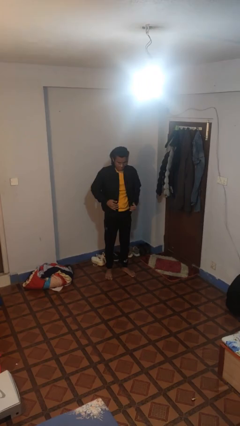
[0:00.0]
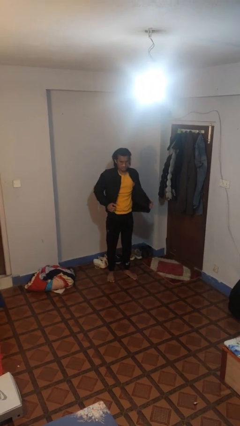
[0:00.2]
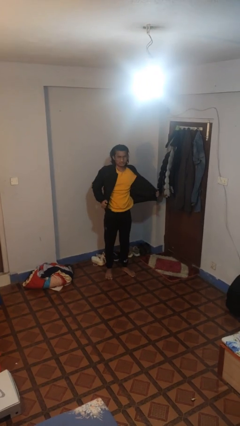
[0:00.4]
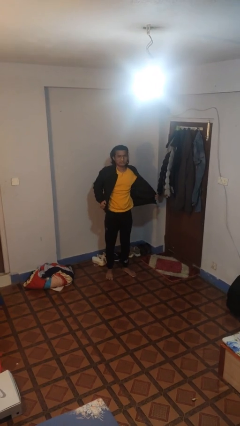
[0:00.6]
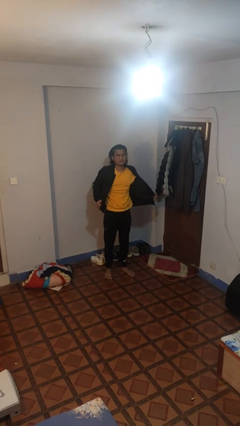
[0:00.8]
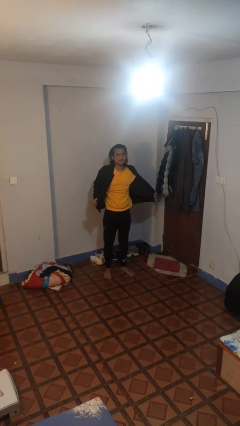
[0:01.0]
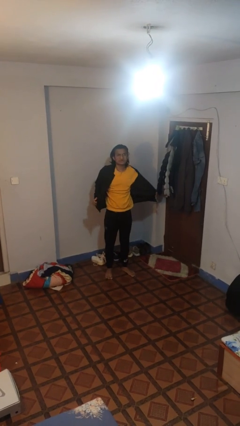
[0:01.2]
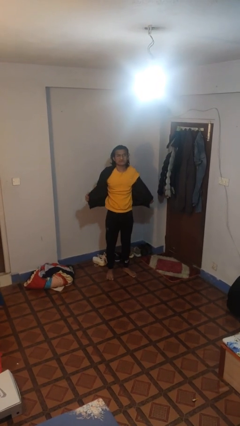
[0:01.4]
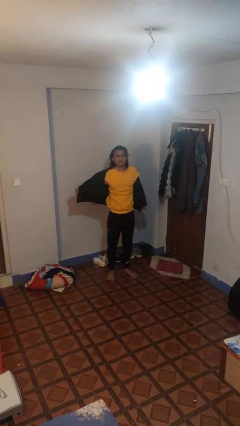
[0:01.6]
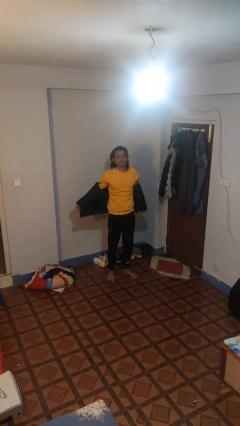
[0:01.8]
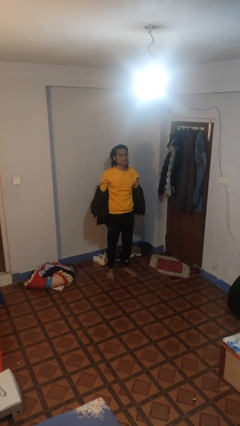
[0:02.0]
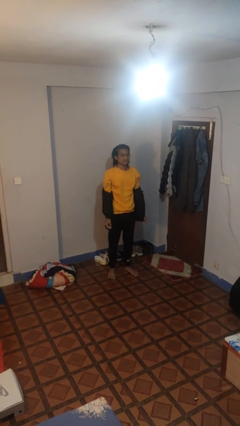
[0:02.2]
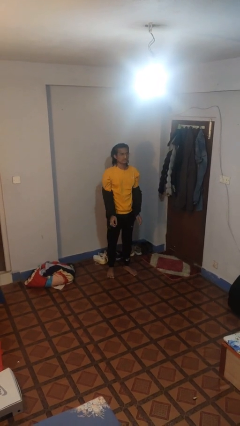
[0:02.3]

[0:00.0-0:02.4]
person takes off jacket

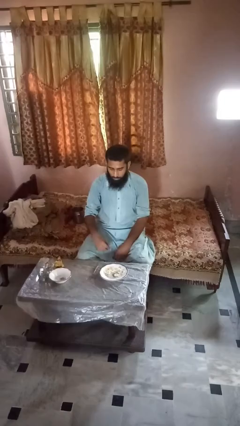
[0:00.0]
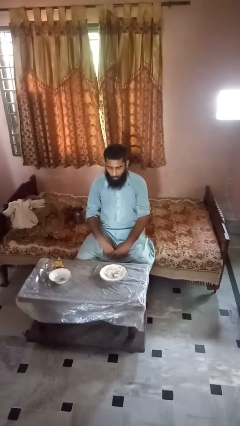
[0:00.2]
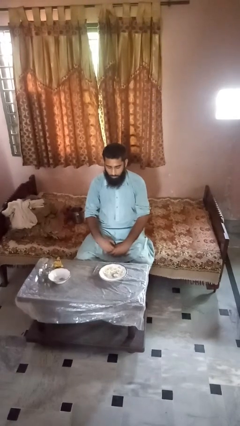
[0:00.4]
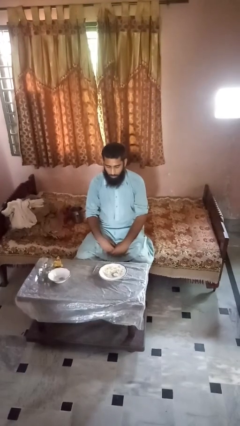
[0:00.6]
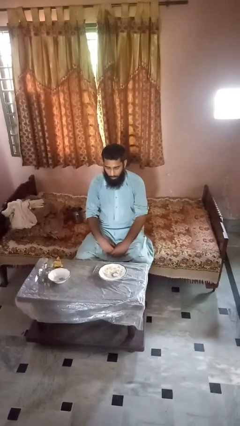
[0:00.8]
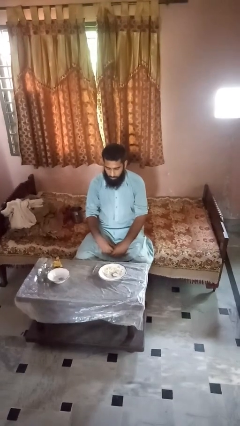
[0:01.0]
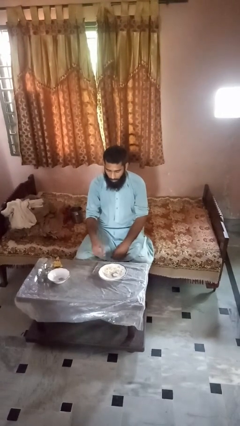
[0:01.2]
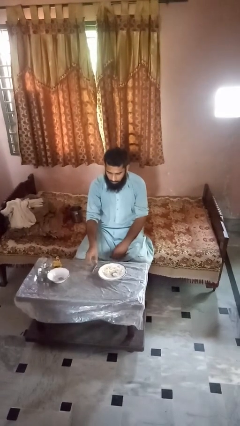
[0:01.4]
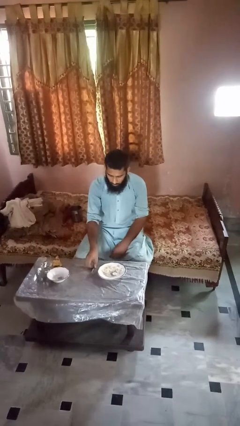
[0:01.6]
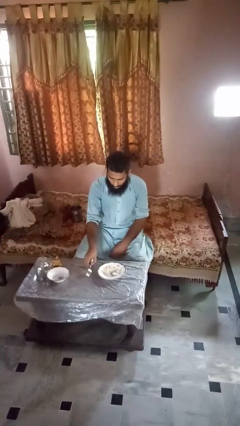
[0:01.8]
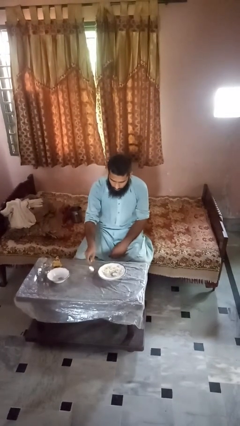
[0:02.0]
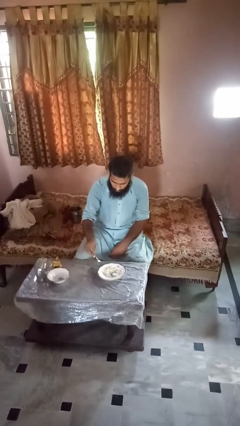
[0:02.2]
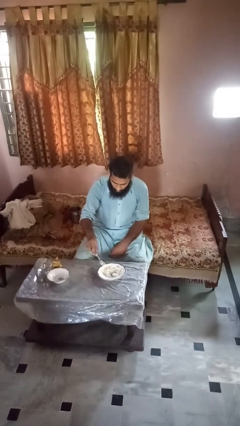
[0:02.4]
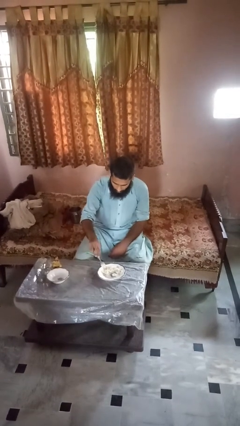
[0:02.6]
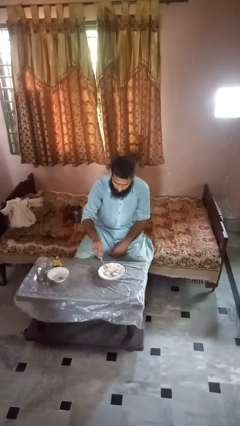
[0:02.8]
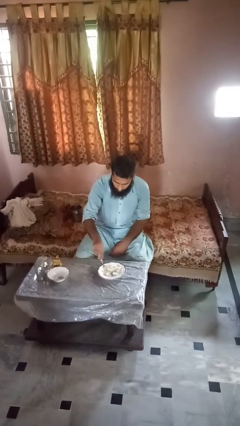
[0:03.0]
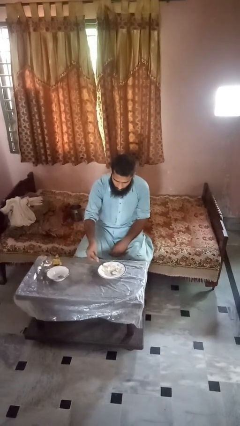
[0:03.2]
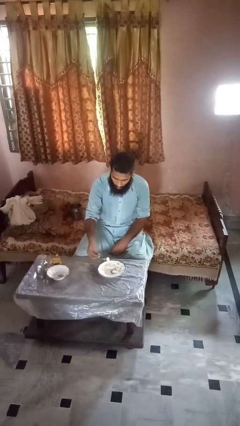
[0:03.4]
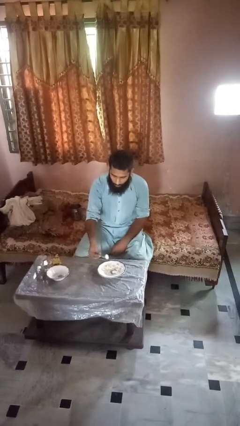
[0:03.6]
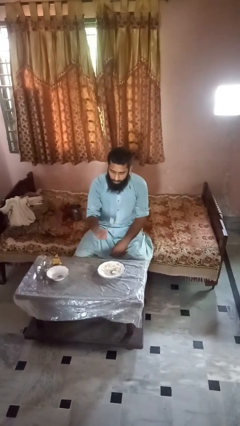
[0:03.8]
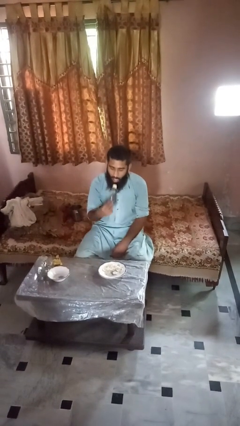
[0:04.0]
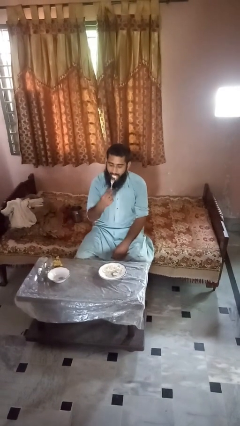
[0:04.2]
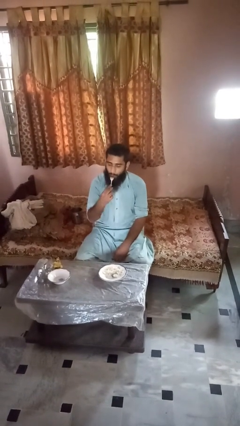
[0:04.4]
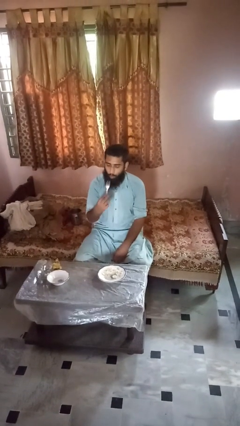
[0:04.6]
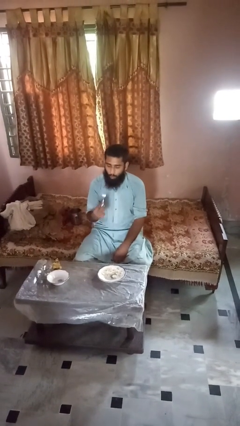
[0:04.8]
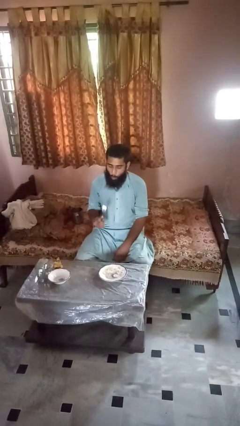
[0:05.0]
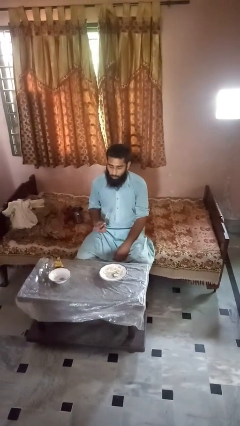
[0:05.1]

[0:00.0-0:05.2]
person eats with utensil

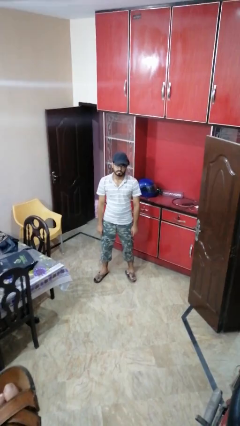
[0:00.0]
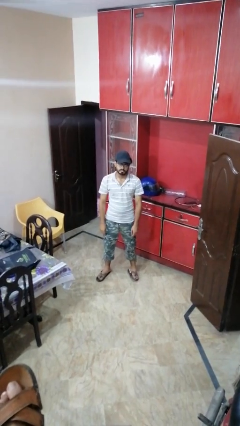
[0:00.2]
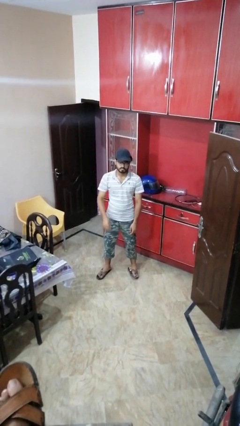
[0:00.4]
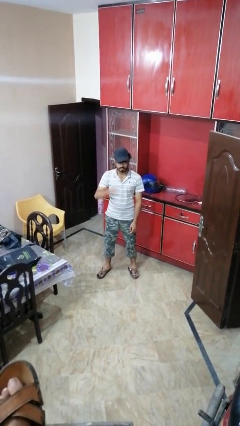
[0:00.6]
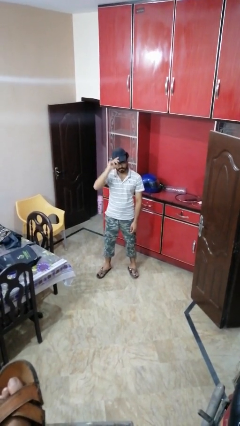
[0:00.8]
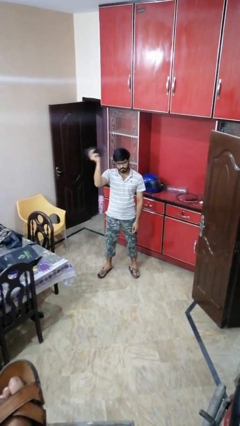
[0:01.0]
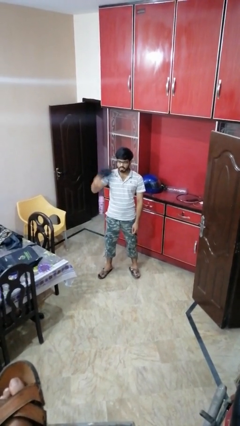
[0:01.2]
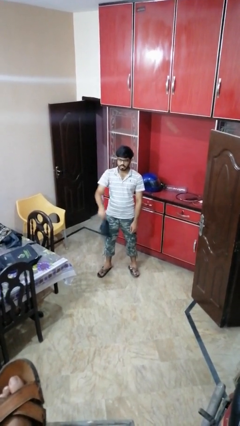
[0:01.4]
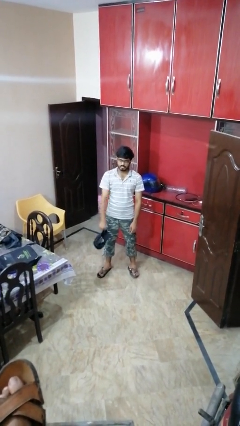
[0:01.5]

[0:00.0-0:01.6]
person takes off hat

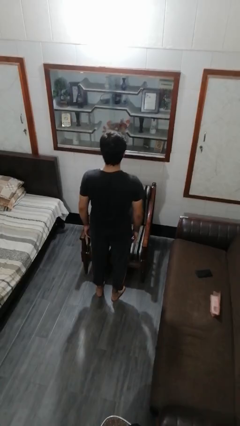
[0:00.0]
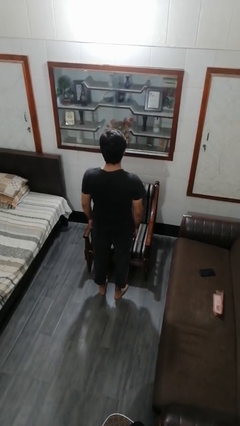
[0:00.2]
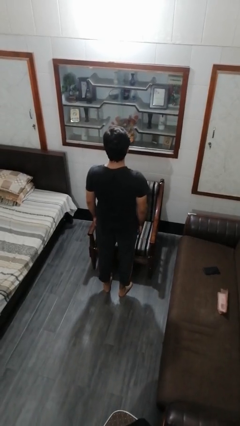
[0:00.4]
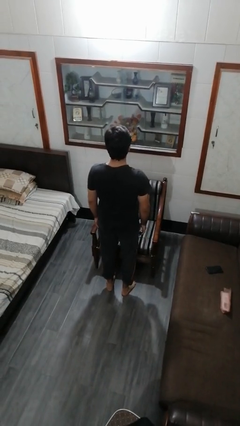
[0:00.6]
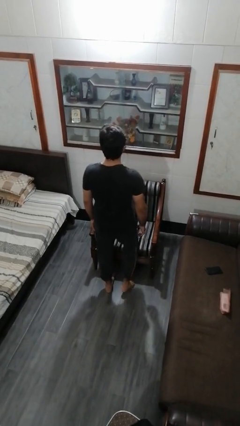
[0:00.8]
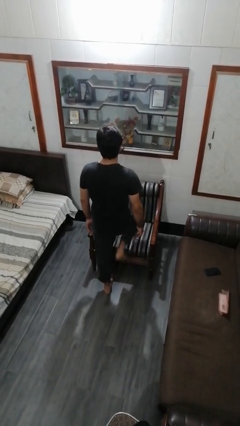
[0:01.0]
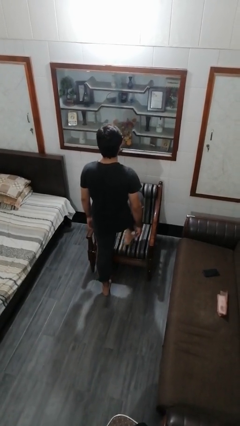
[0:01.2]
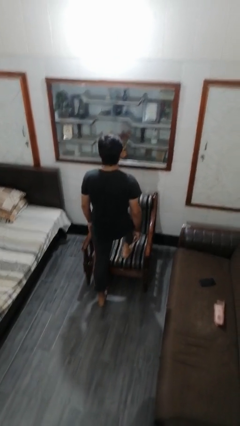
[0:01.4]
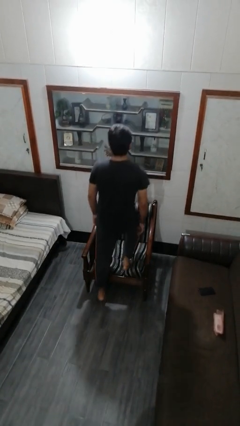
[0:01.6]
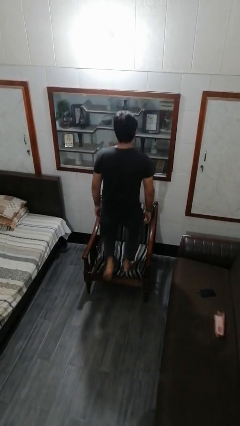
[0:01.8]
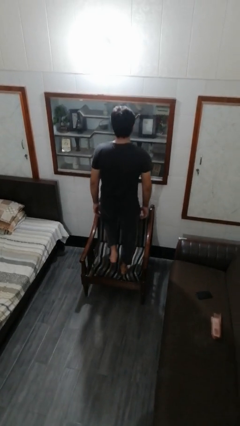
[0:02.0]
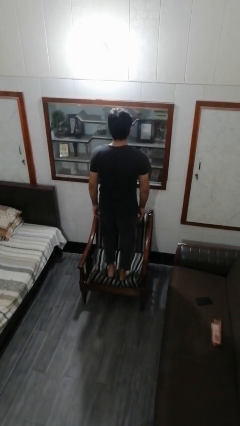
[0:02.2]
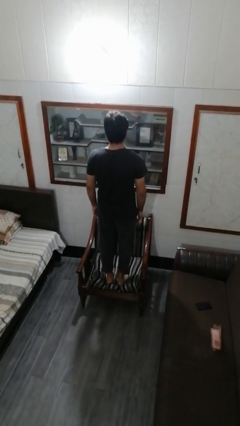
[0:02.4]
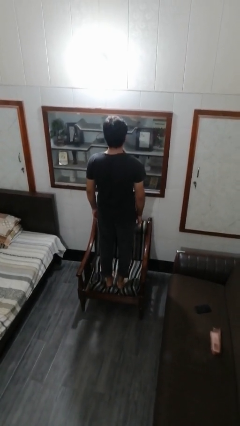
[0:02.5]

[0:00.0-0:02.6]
person climbs on chair

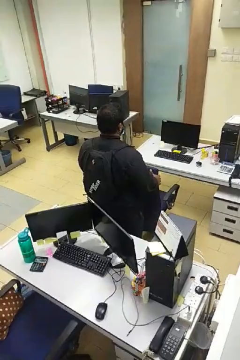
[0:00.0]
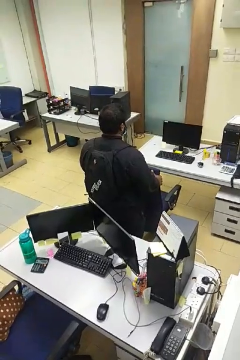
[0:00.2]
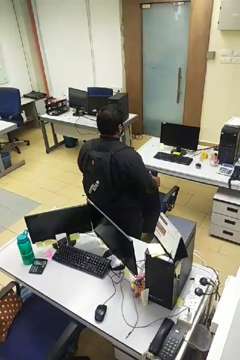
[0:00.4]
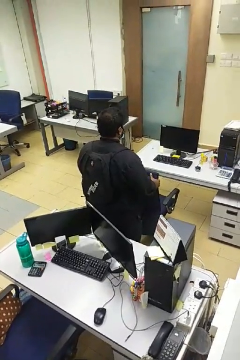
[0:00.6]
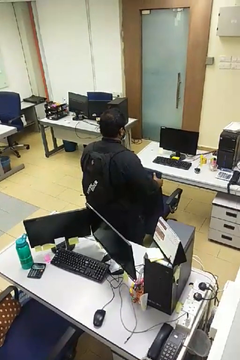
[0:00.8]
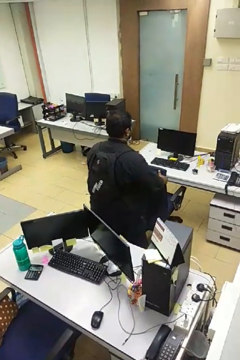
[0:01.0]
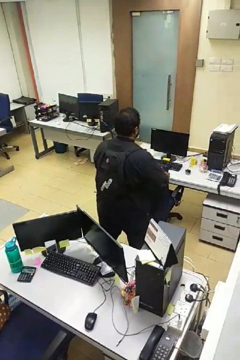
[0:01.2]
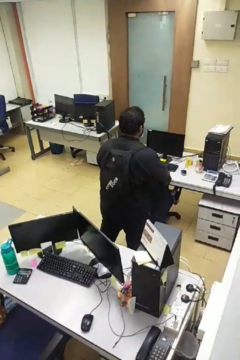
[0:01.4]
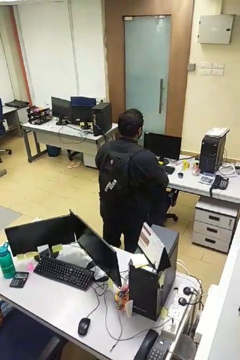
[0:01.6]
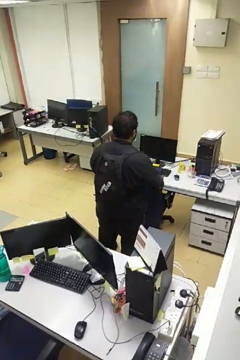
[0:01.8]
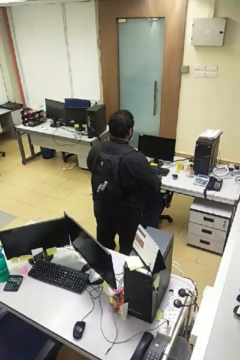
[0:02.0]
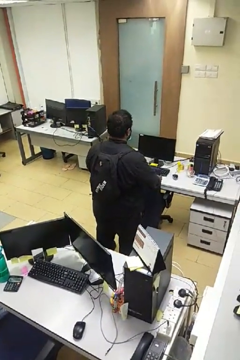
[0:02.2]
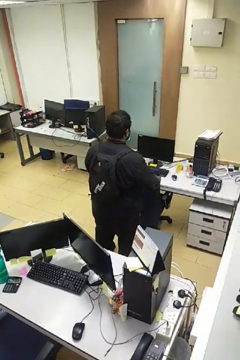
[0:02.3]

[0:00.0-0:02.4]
person pushes in chair

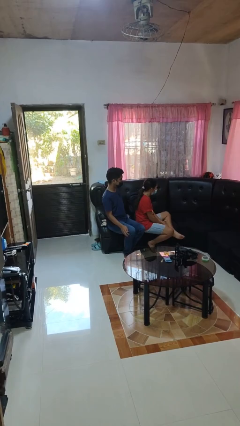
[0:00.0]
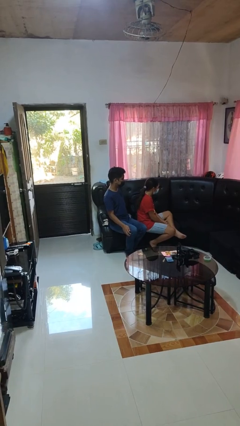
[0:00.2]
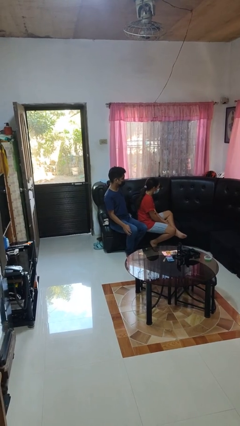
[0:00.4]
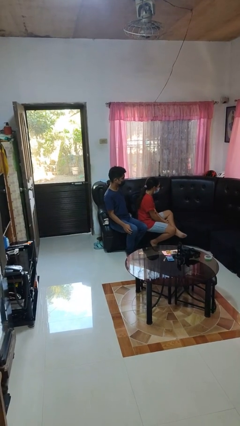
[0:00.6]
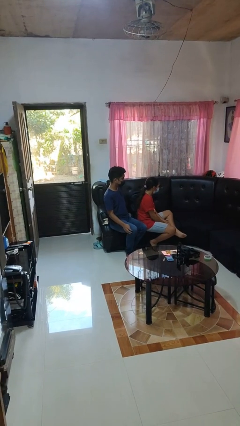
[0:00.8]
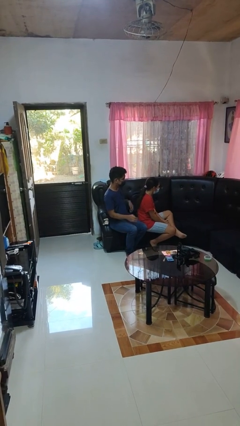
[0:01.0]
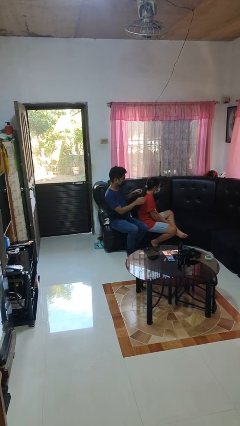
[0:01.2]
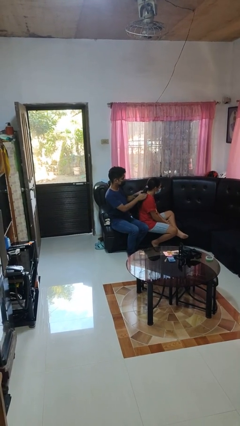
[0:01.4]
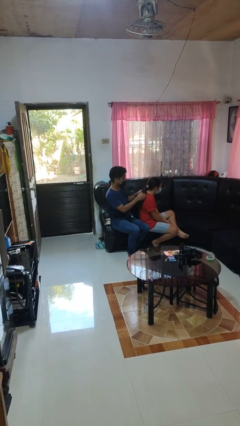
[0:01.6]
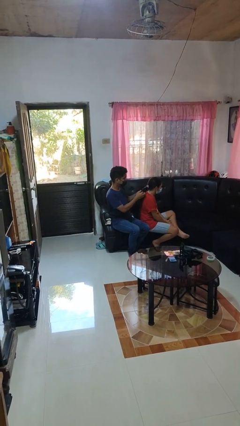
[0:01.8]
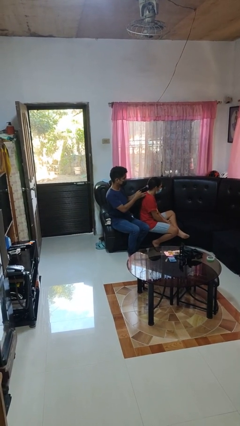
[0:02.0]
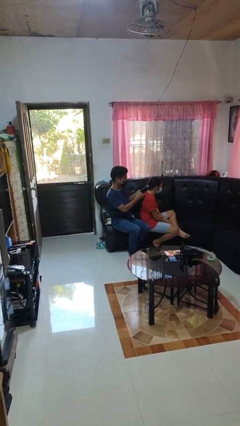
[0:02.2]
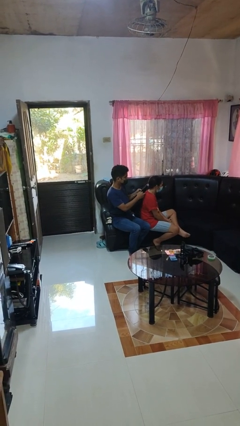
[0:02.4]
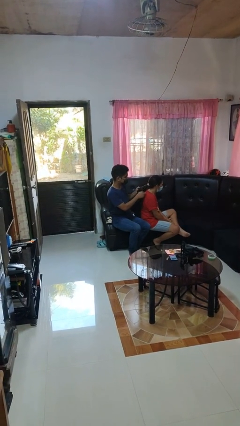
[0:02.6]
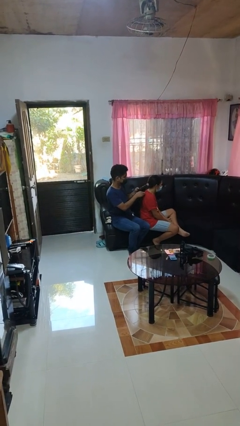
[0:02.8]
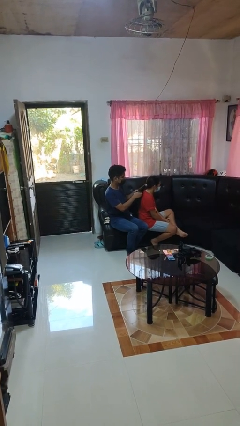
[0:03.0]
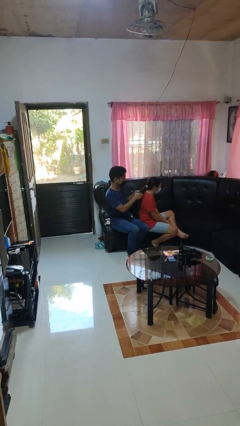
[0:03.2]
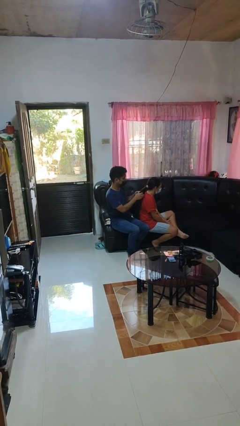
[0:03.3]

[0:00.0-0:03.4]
person braids hair of person
